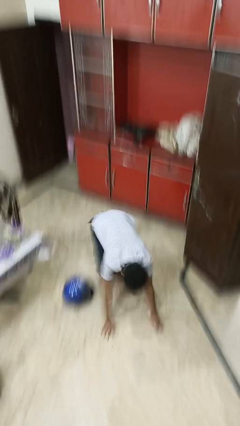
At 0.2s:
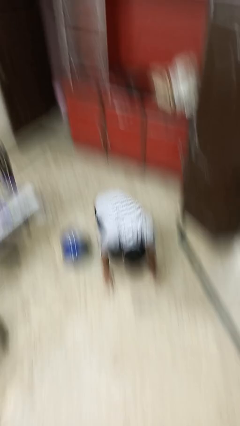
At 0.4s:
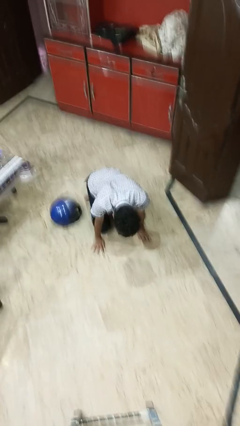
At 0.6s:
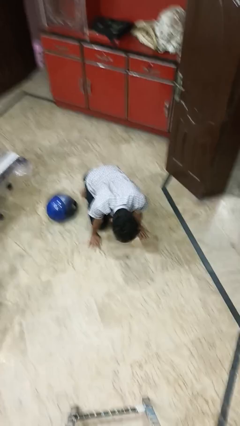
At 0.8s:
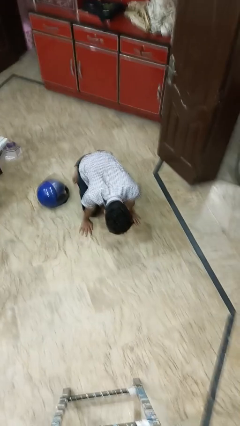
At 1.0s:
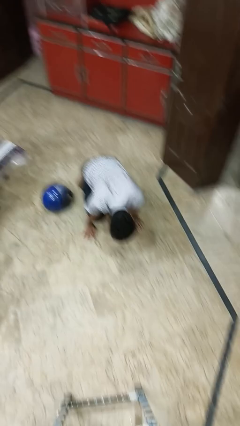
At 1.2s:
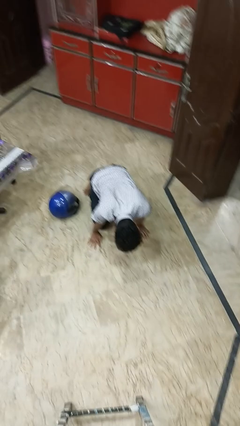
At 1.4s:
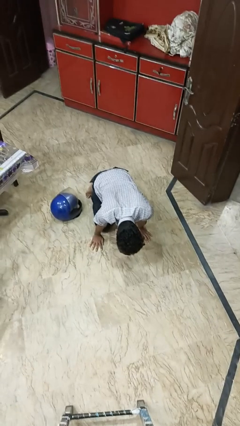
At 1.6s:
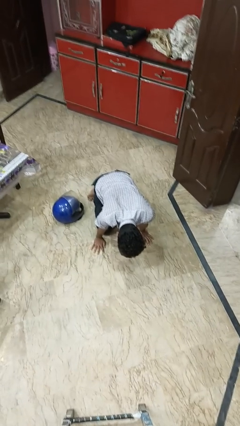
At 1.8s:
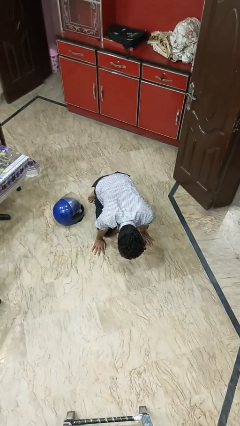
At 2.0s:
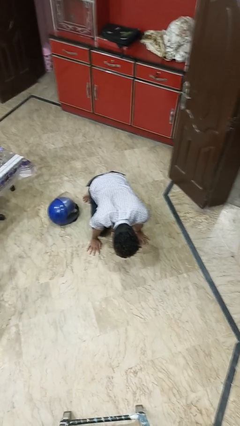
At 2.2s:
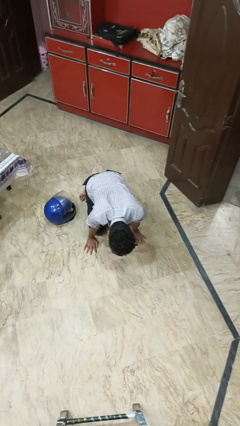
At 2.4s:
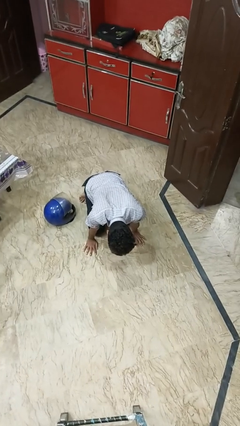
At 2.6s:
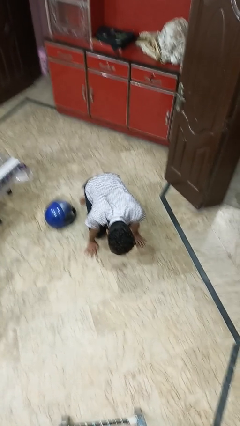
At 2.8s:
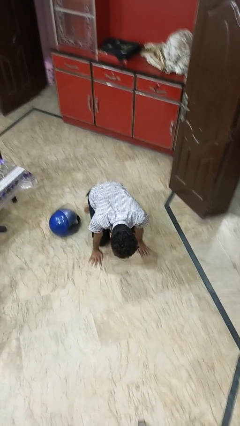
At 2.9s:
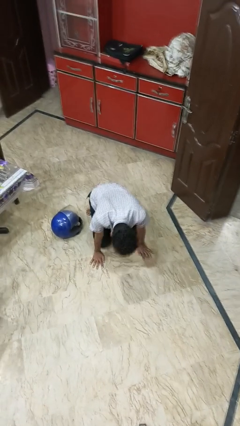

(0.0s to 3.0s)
person trips on object on floor

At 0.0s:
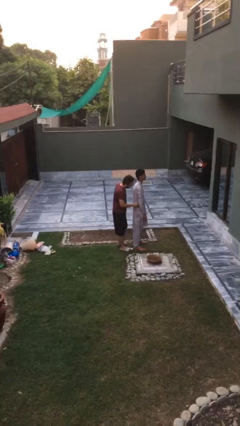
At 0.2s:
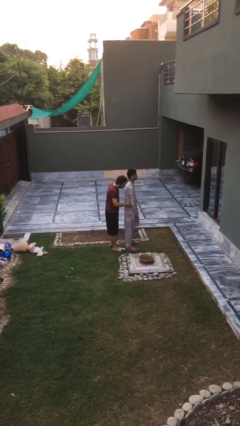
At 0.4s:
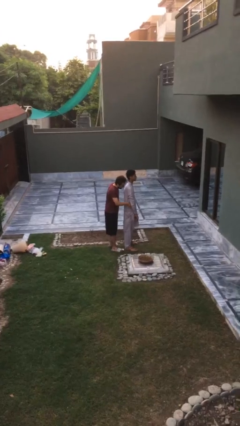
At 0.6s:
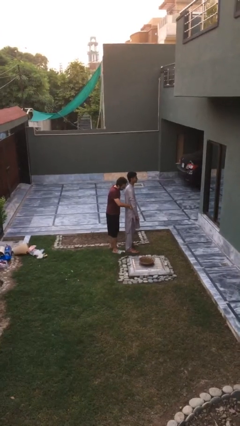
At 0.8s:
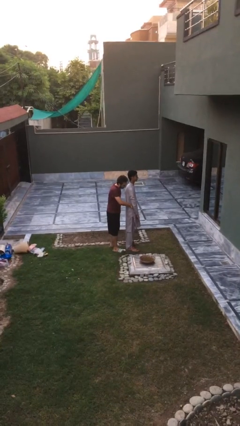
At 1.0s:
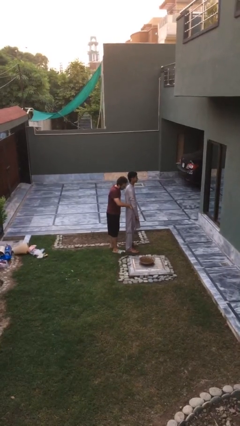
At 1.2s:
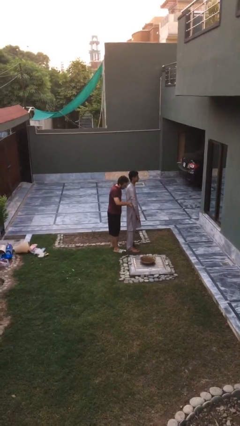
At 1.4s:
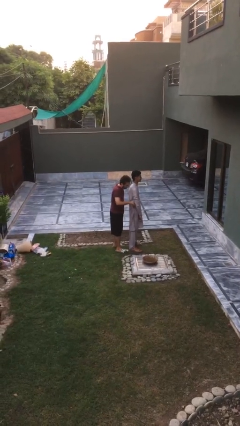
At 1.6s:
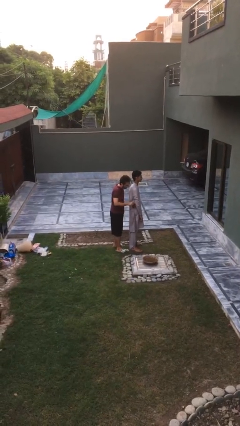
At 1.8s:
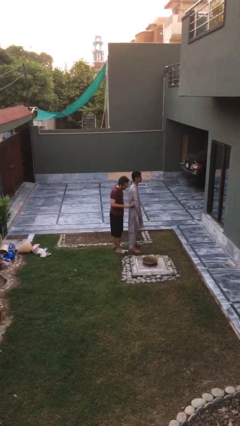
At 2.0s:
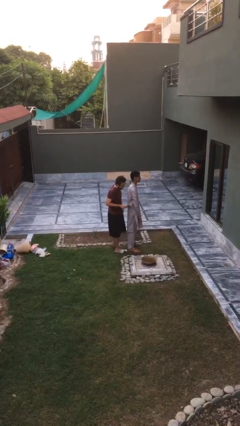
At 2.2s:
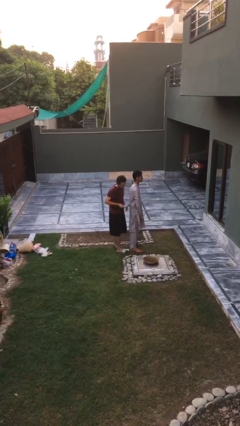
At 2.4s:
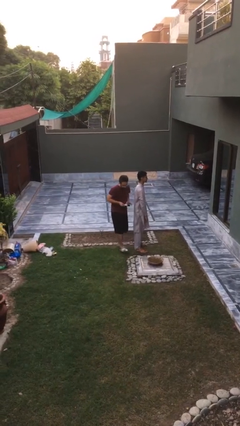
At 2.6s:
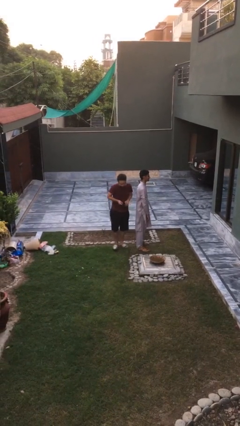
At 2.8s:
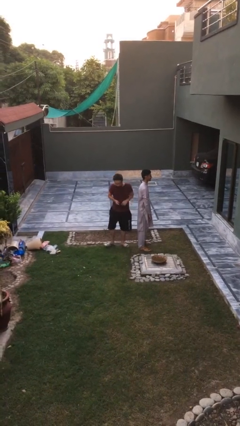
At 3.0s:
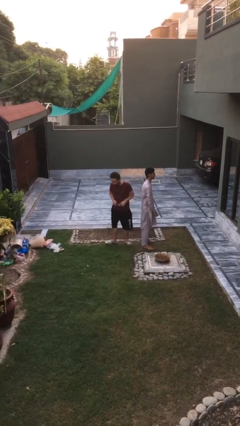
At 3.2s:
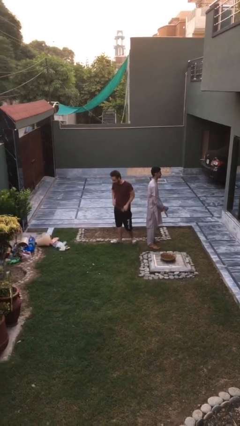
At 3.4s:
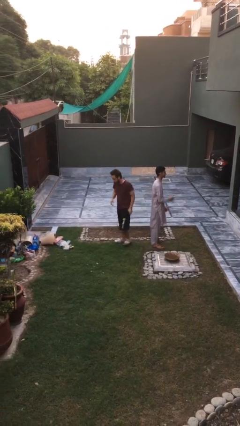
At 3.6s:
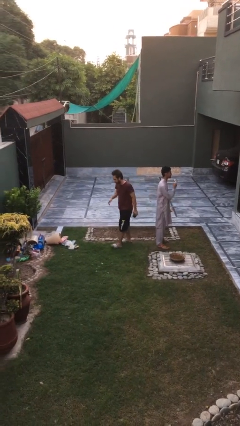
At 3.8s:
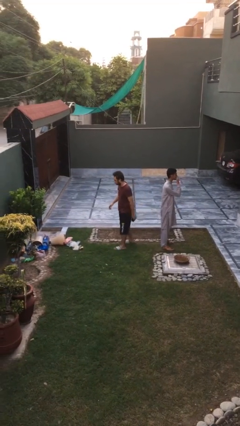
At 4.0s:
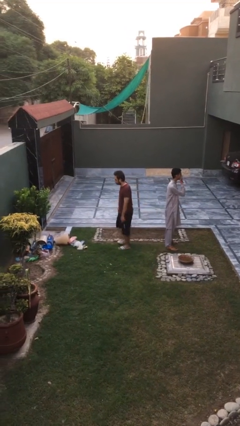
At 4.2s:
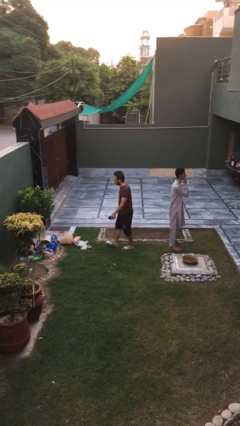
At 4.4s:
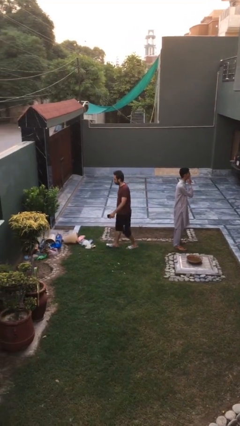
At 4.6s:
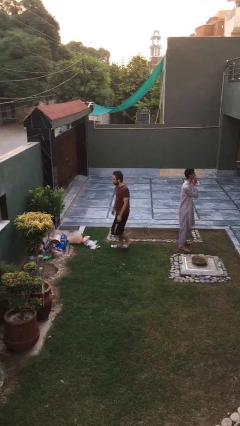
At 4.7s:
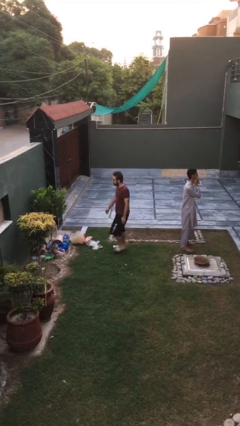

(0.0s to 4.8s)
person steals object from person

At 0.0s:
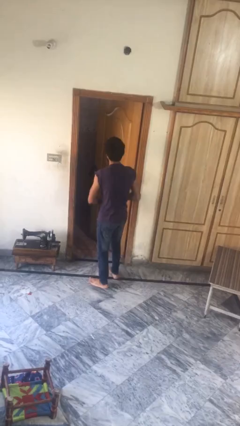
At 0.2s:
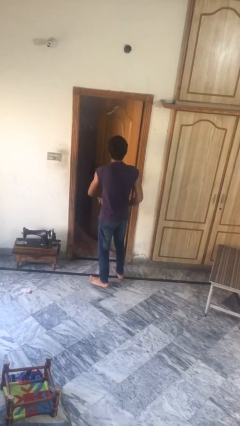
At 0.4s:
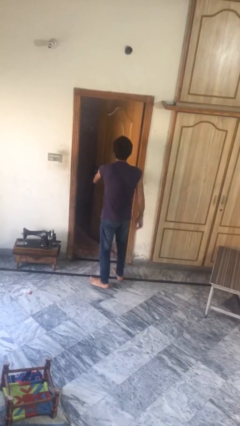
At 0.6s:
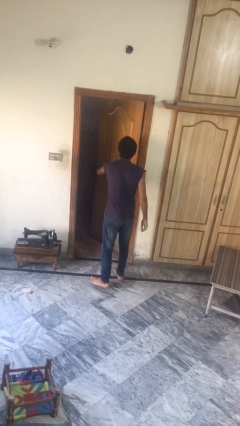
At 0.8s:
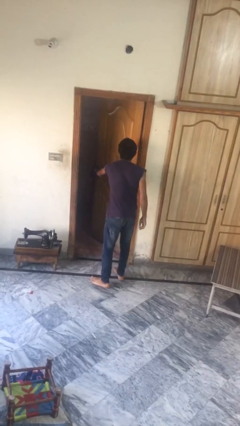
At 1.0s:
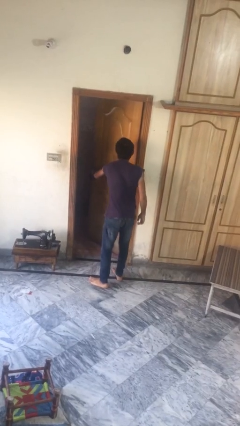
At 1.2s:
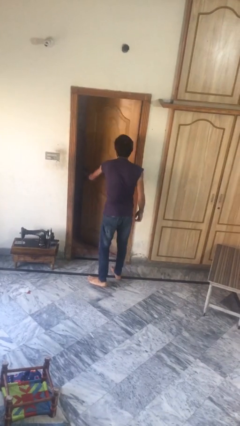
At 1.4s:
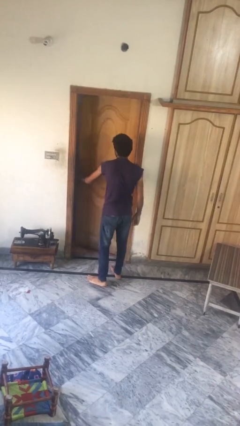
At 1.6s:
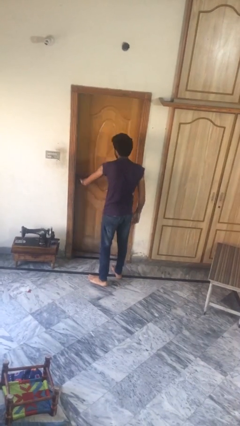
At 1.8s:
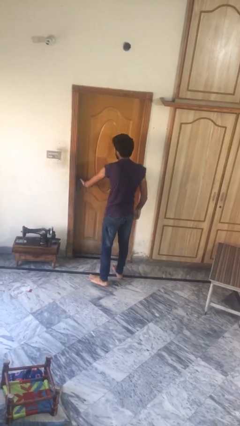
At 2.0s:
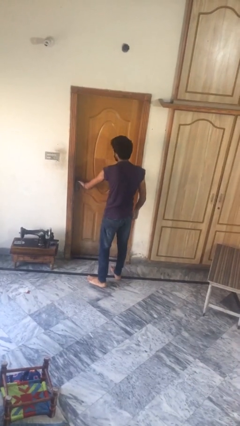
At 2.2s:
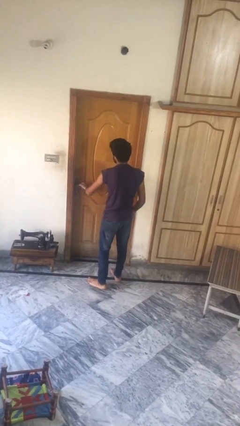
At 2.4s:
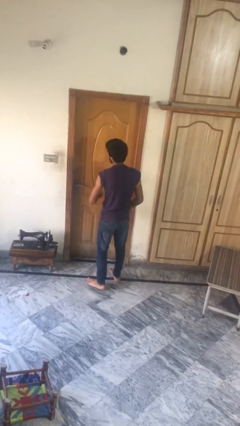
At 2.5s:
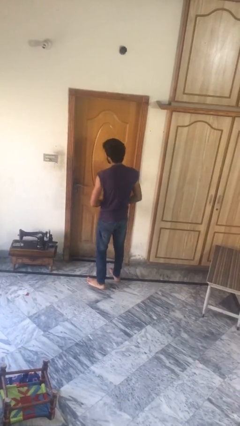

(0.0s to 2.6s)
person closes facility door

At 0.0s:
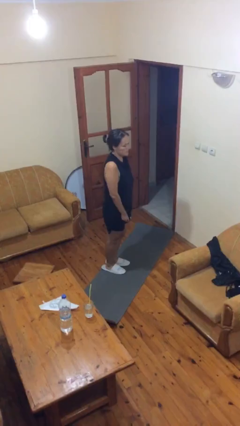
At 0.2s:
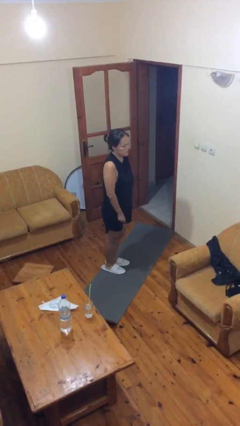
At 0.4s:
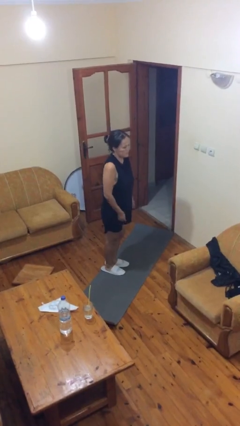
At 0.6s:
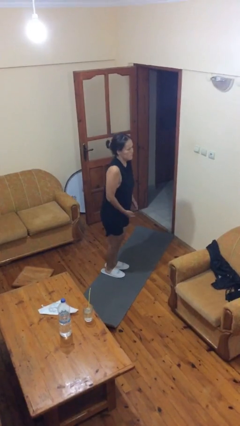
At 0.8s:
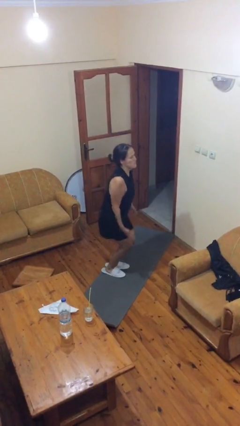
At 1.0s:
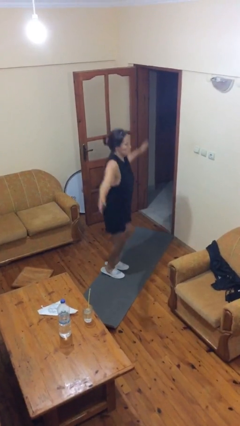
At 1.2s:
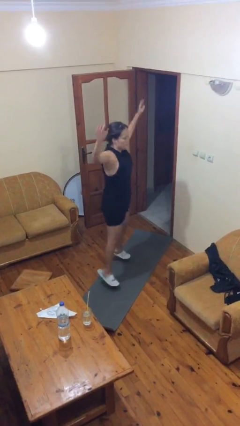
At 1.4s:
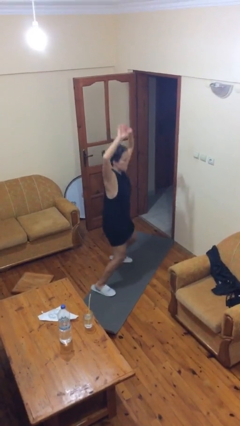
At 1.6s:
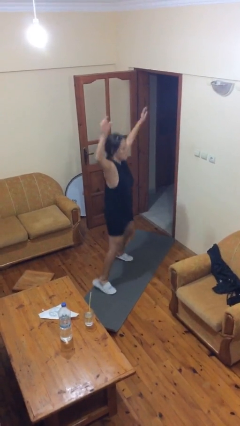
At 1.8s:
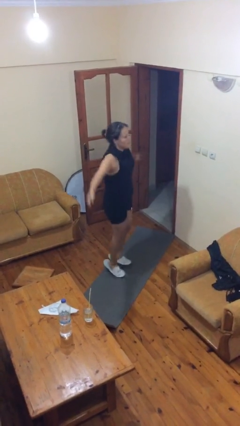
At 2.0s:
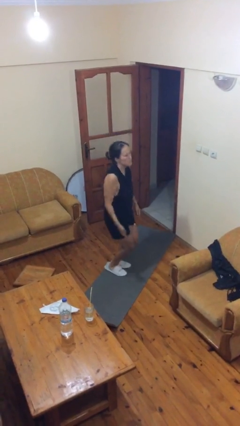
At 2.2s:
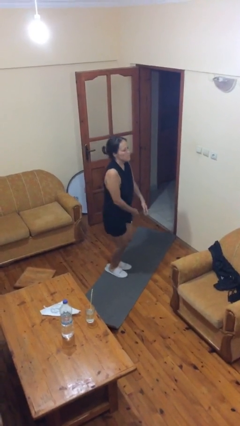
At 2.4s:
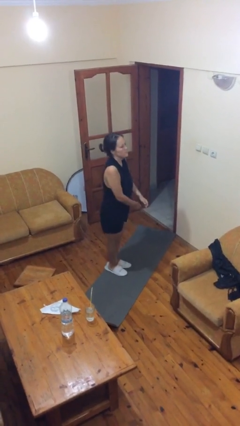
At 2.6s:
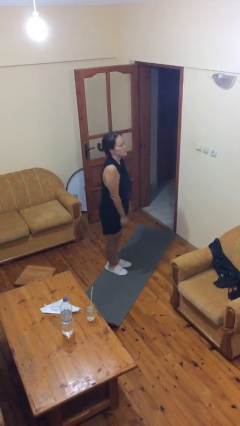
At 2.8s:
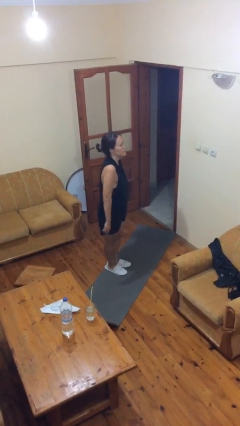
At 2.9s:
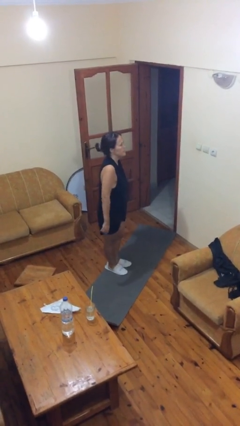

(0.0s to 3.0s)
person exercises with jumping jacks

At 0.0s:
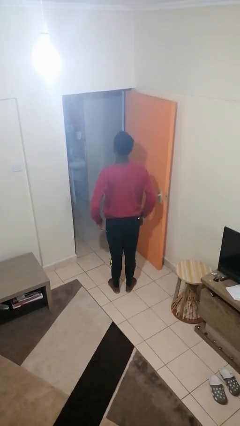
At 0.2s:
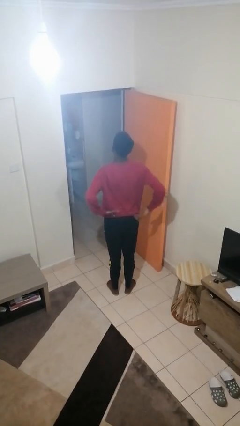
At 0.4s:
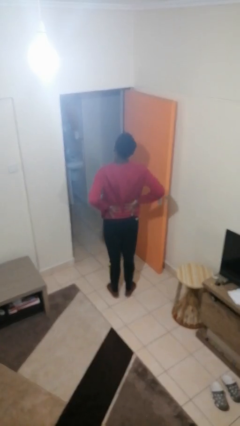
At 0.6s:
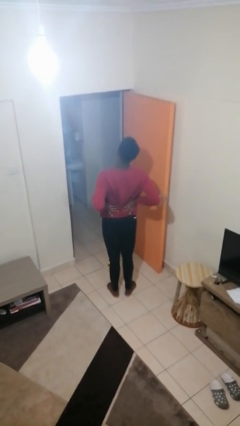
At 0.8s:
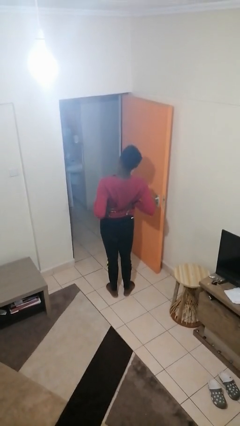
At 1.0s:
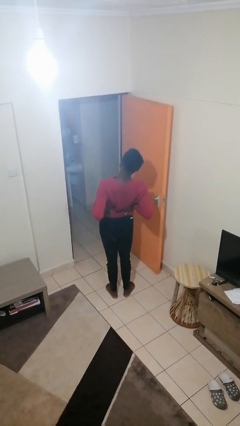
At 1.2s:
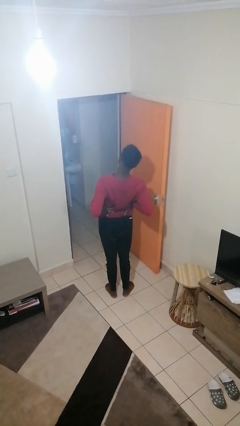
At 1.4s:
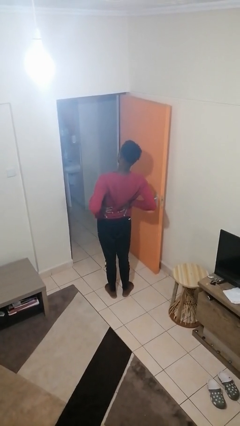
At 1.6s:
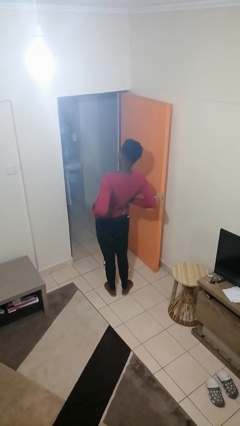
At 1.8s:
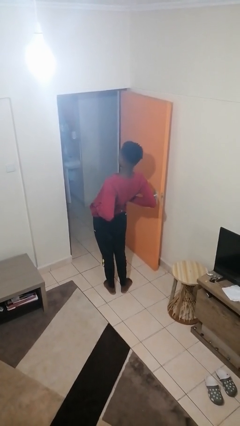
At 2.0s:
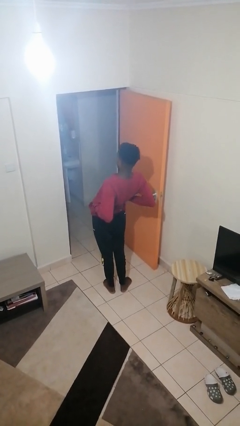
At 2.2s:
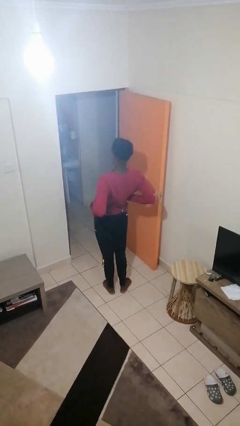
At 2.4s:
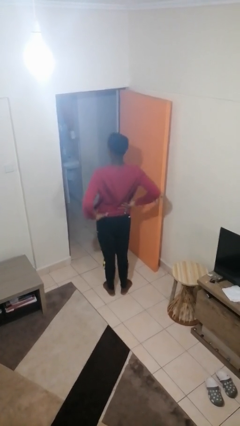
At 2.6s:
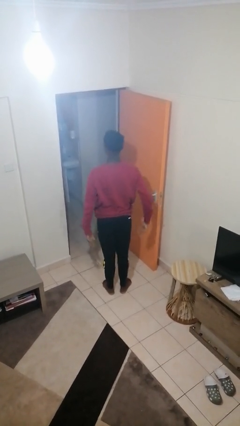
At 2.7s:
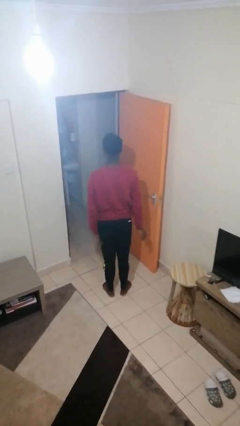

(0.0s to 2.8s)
person stretches back

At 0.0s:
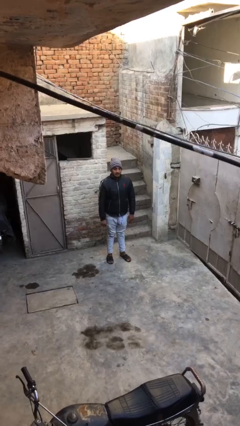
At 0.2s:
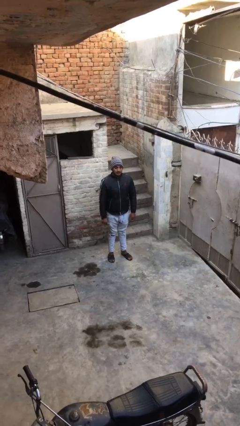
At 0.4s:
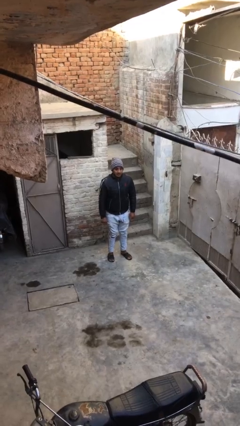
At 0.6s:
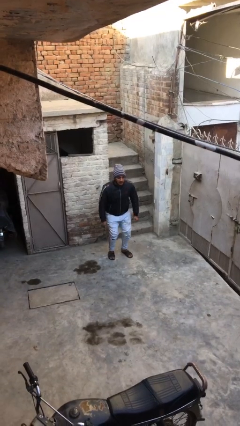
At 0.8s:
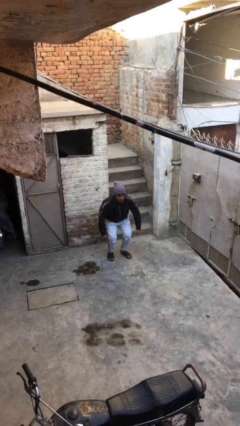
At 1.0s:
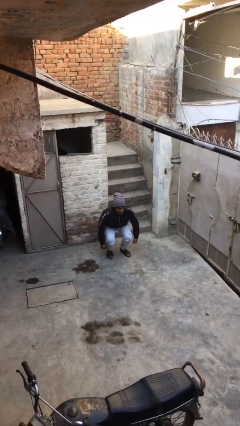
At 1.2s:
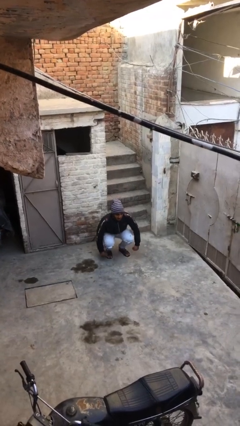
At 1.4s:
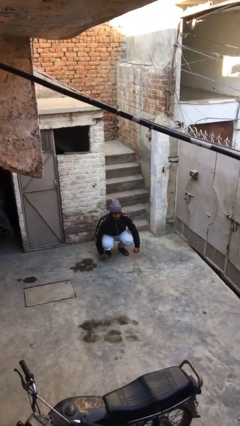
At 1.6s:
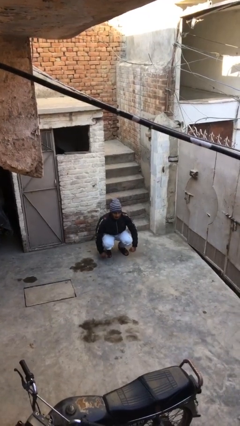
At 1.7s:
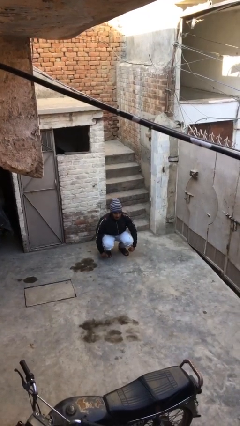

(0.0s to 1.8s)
person sits down
